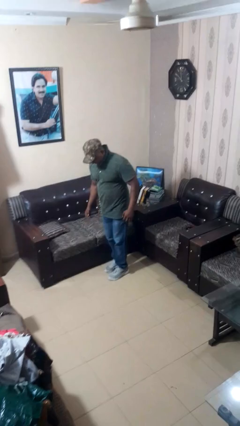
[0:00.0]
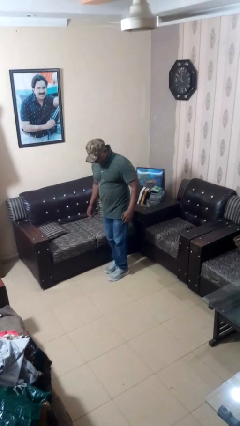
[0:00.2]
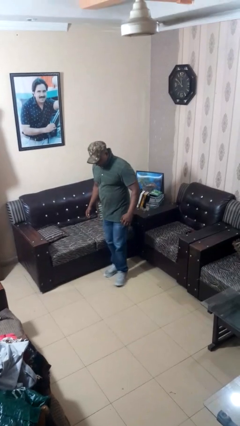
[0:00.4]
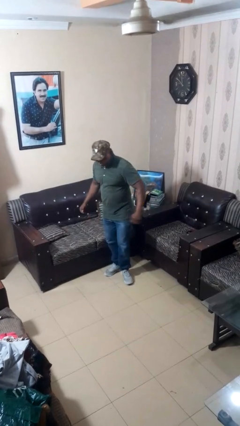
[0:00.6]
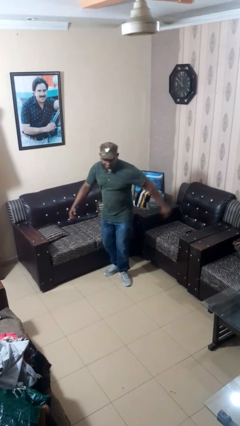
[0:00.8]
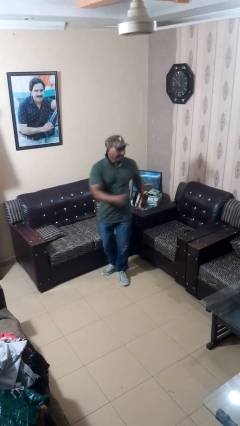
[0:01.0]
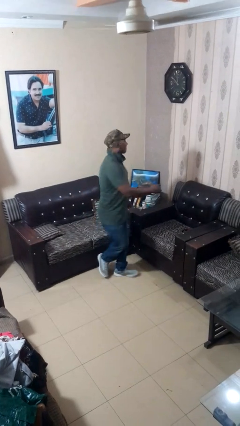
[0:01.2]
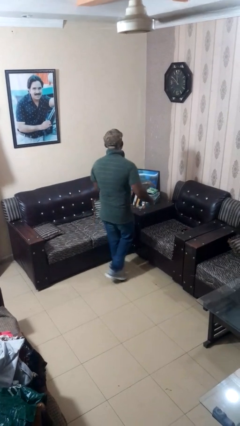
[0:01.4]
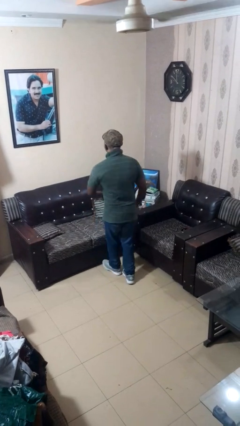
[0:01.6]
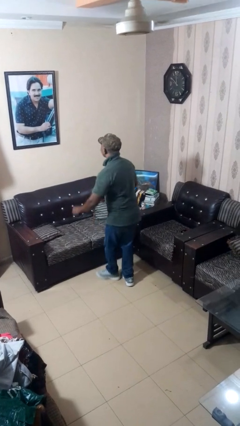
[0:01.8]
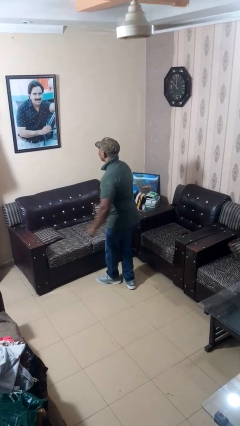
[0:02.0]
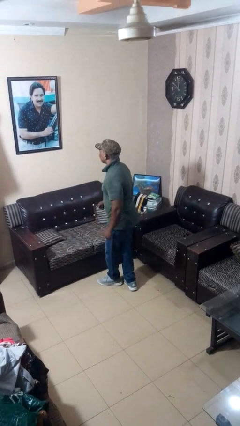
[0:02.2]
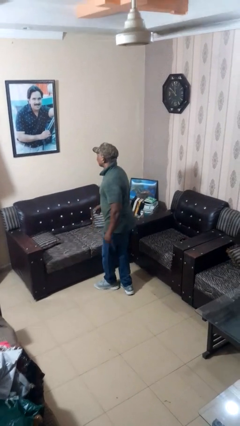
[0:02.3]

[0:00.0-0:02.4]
person twirls

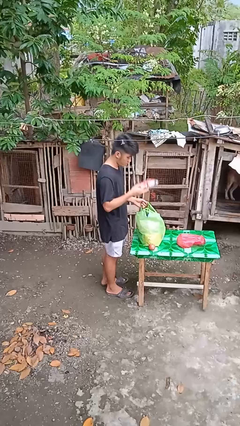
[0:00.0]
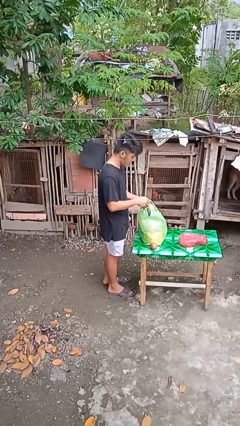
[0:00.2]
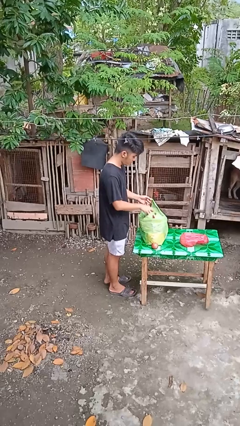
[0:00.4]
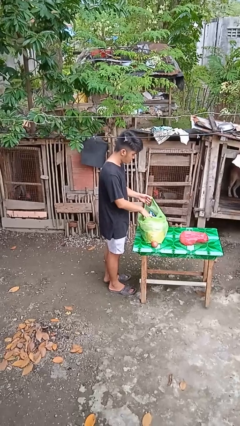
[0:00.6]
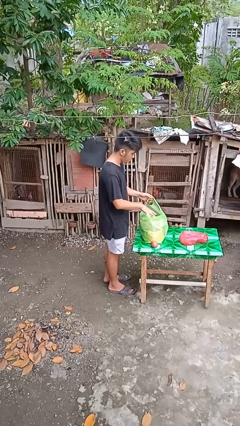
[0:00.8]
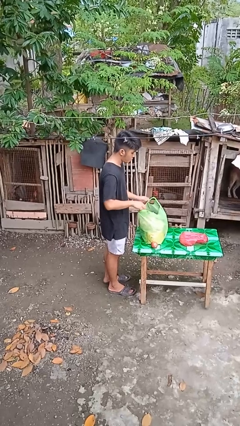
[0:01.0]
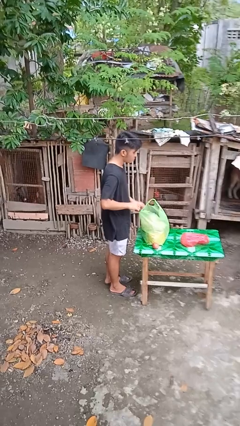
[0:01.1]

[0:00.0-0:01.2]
person puts object into bag

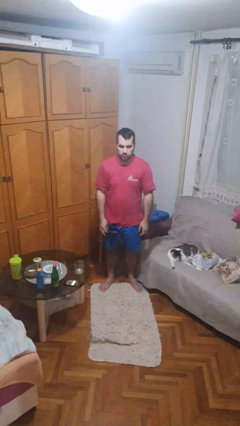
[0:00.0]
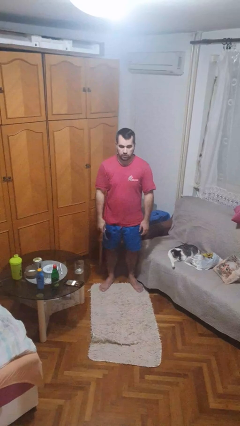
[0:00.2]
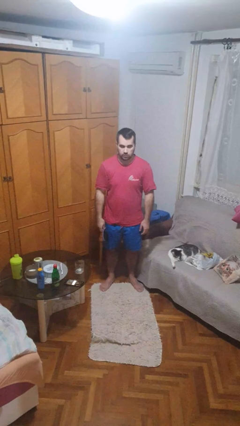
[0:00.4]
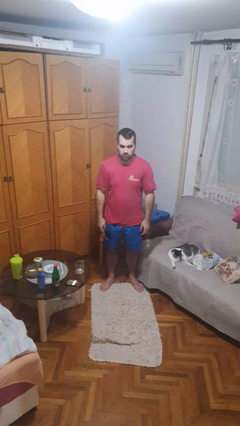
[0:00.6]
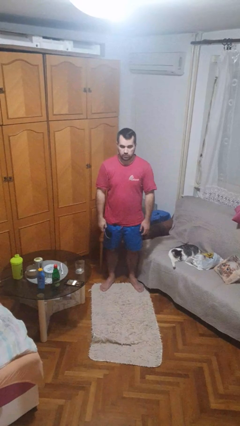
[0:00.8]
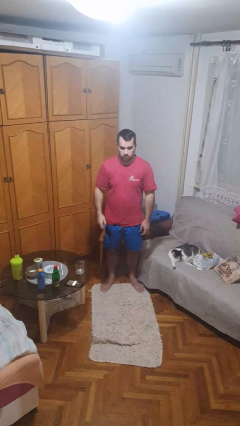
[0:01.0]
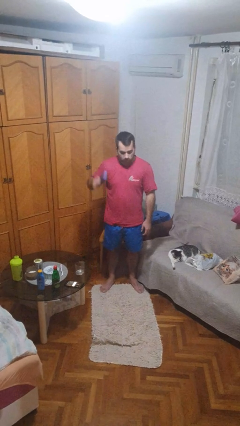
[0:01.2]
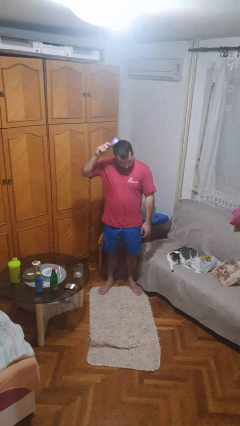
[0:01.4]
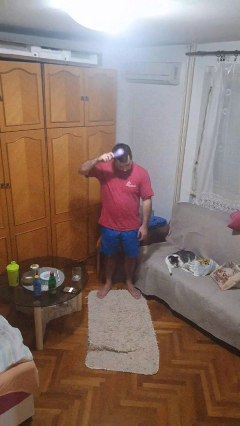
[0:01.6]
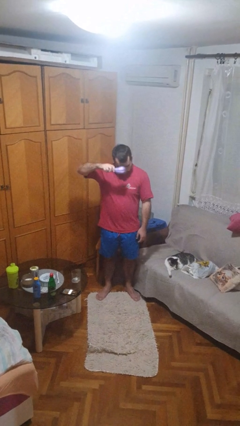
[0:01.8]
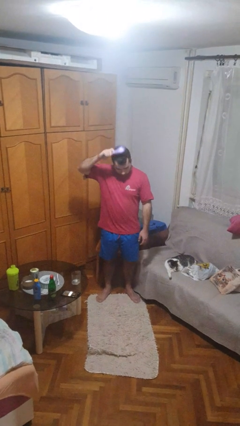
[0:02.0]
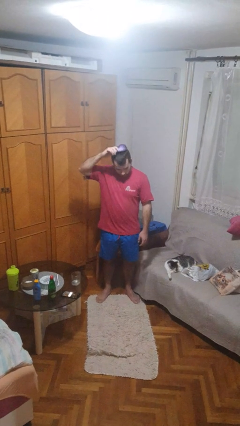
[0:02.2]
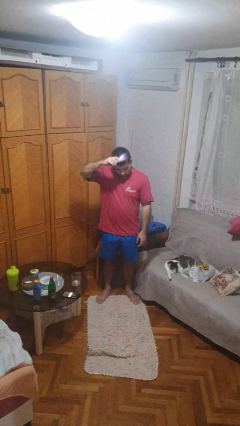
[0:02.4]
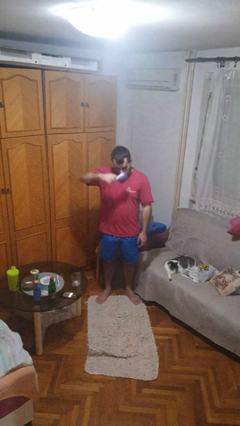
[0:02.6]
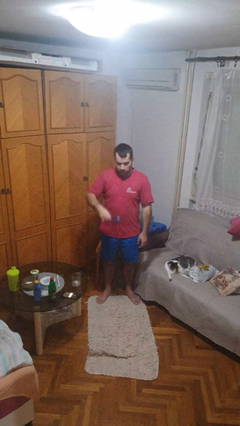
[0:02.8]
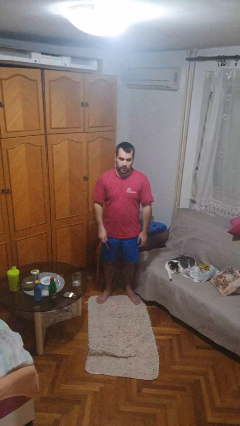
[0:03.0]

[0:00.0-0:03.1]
person brushes hair

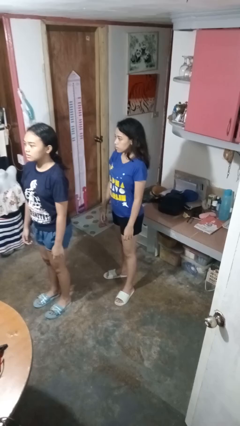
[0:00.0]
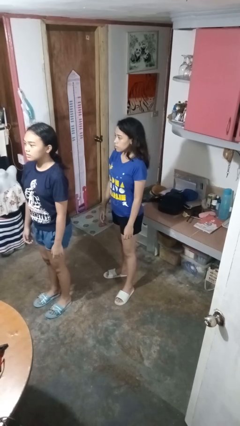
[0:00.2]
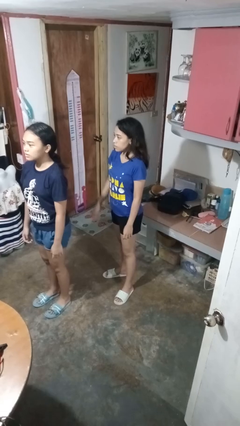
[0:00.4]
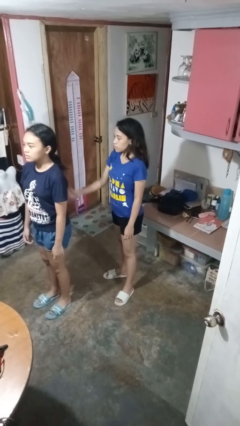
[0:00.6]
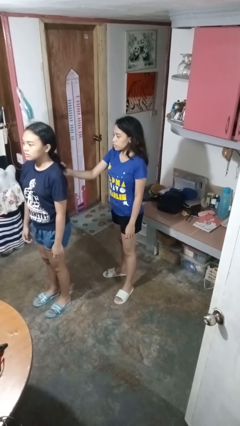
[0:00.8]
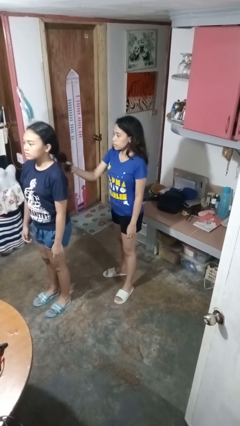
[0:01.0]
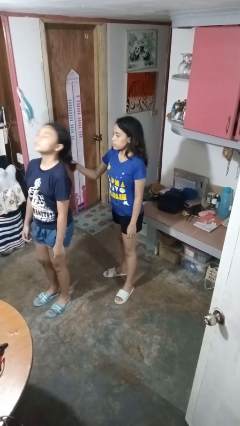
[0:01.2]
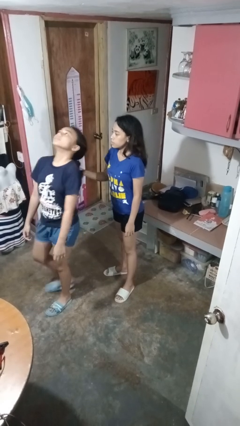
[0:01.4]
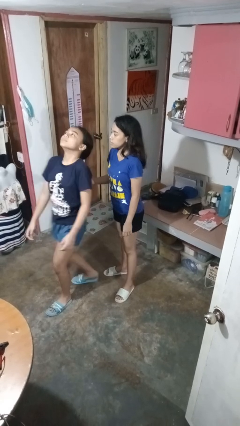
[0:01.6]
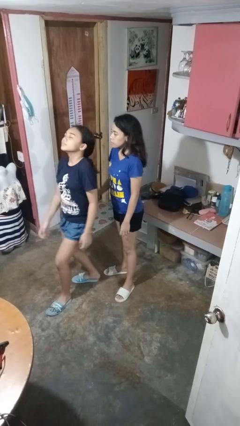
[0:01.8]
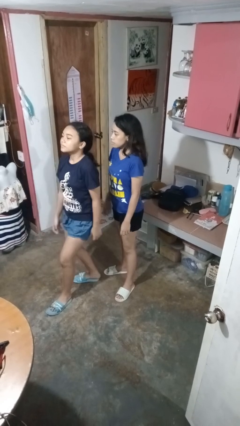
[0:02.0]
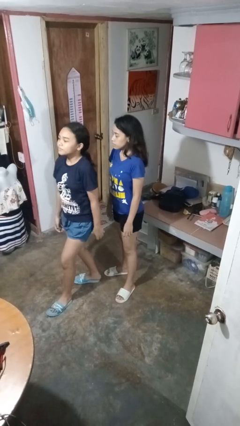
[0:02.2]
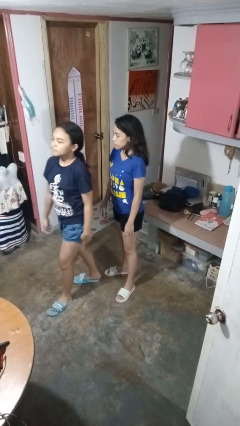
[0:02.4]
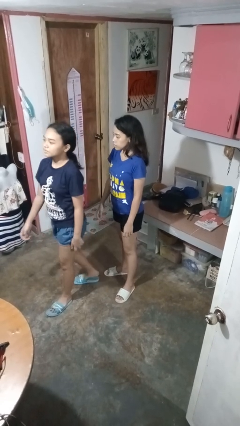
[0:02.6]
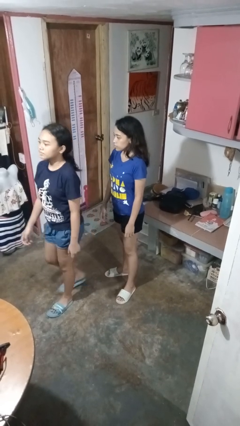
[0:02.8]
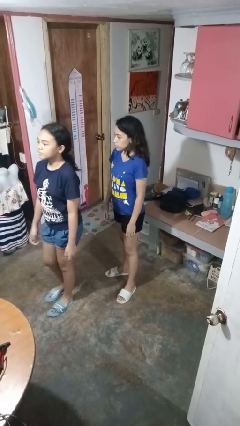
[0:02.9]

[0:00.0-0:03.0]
person grabs person by hair

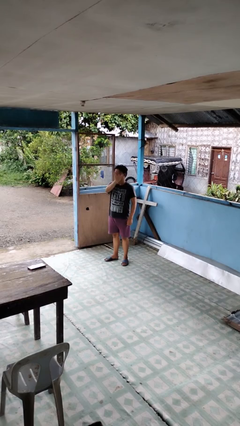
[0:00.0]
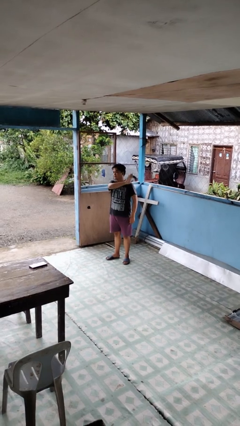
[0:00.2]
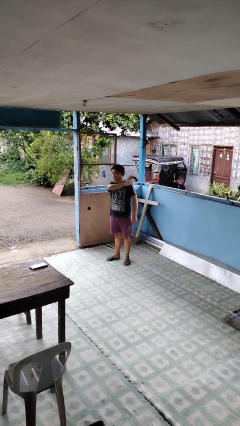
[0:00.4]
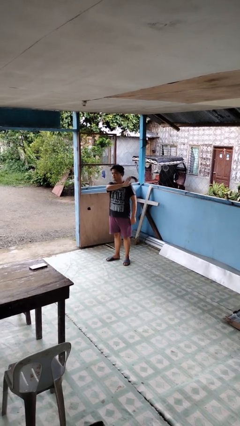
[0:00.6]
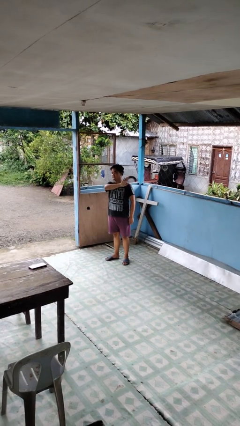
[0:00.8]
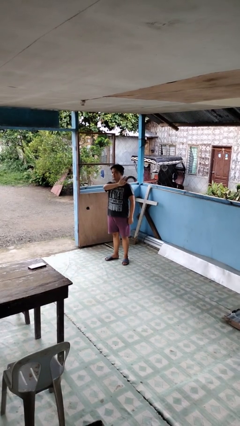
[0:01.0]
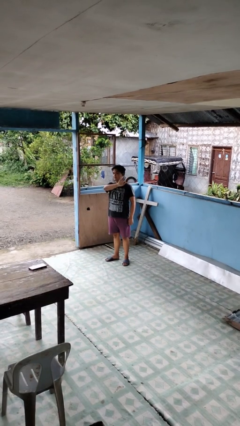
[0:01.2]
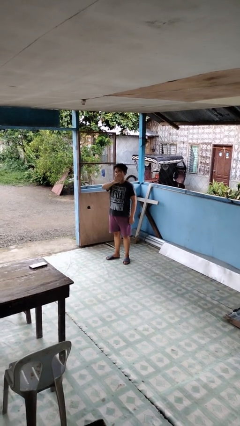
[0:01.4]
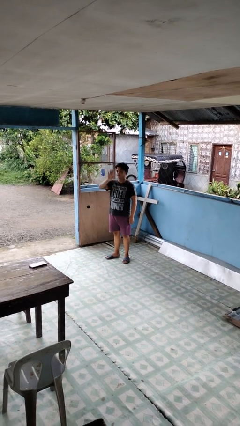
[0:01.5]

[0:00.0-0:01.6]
person gestures swipe left

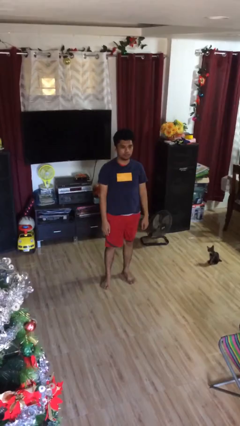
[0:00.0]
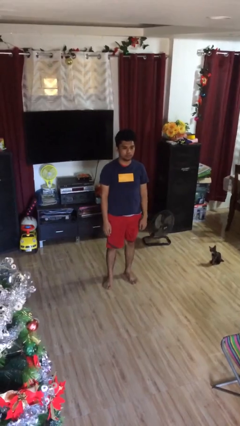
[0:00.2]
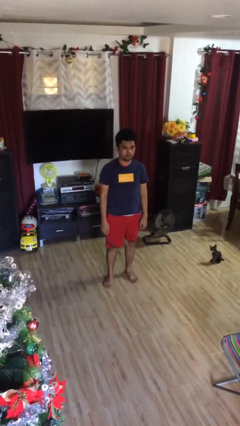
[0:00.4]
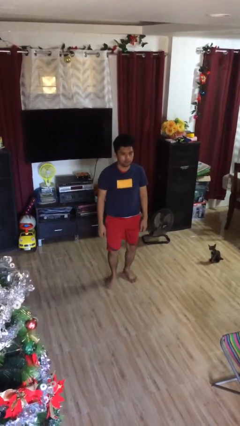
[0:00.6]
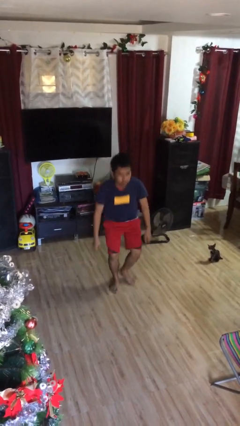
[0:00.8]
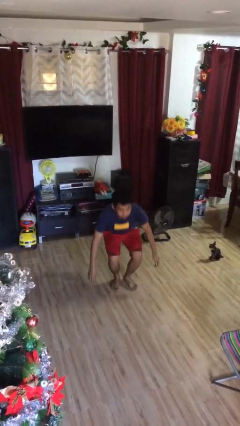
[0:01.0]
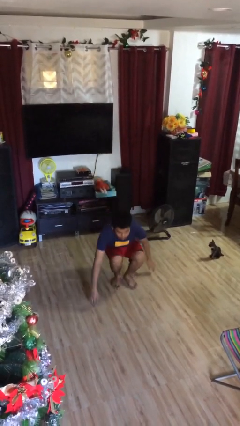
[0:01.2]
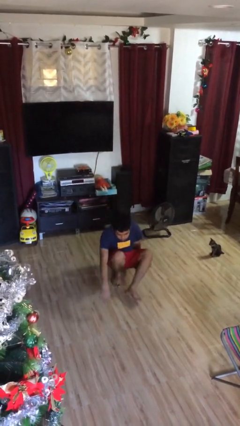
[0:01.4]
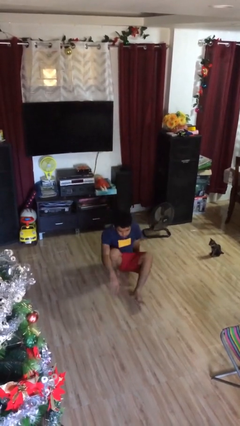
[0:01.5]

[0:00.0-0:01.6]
person sits down

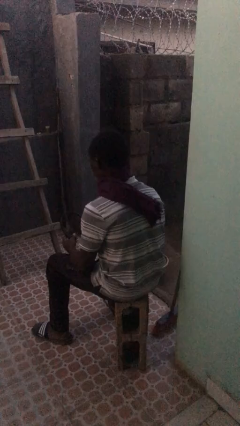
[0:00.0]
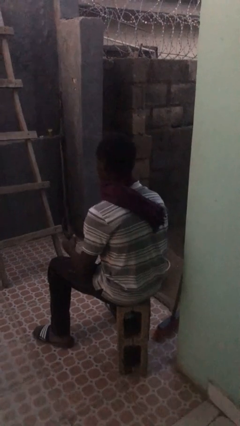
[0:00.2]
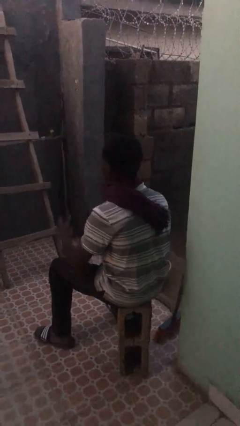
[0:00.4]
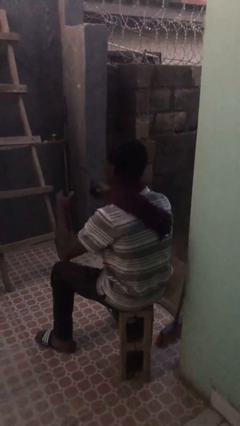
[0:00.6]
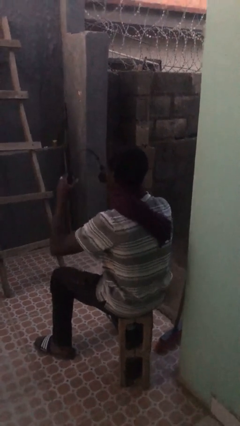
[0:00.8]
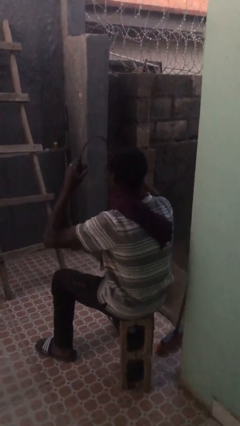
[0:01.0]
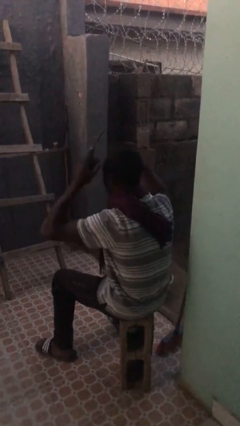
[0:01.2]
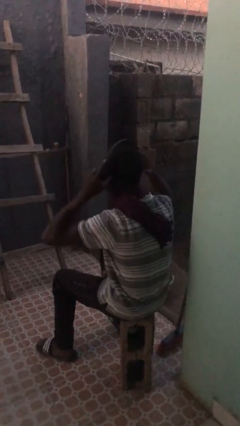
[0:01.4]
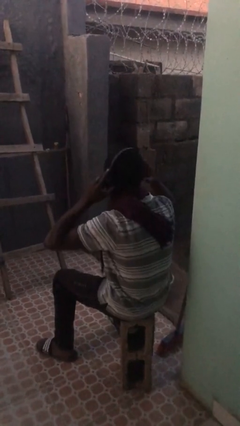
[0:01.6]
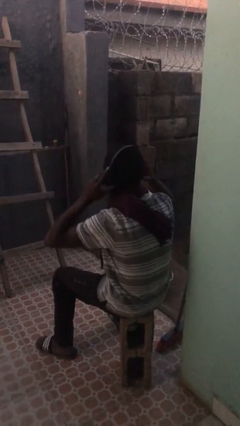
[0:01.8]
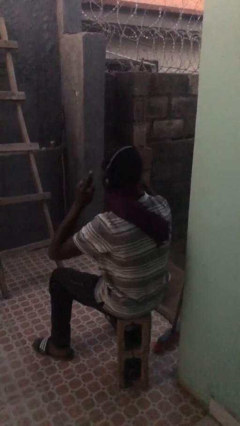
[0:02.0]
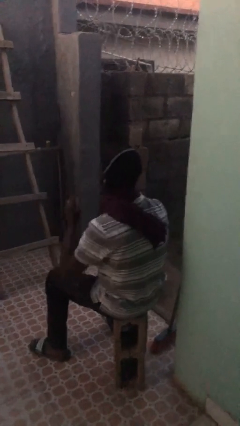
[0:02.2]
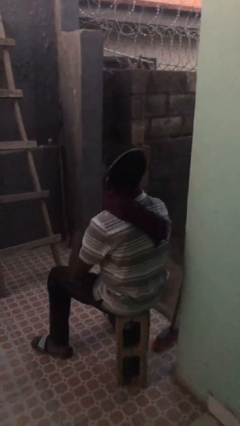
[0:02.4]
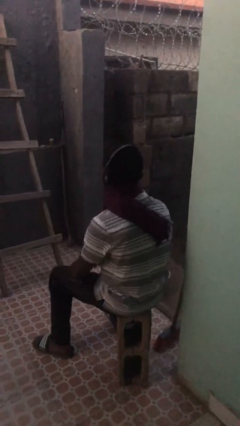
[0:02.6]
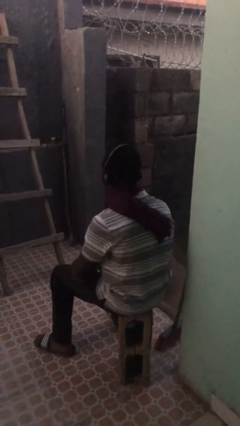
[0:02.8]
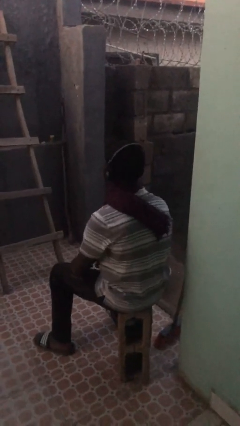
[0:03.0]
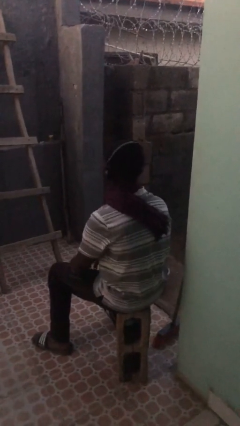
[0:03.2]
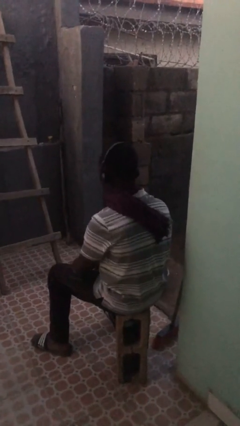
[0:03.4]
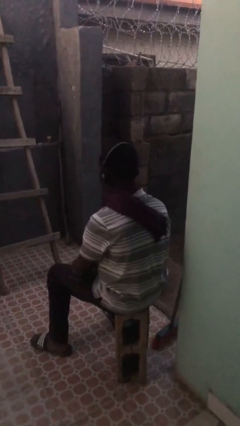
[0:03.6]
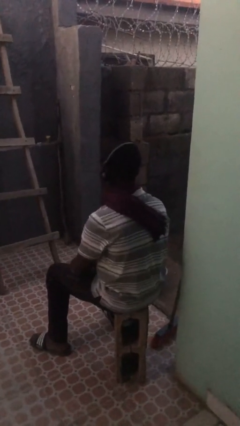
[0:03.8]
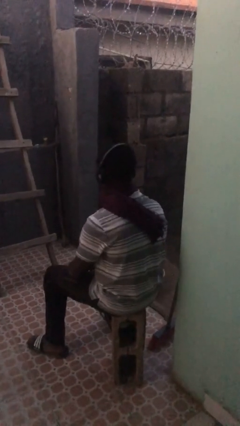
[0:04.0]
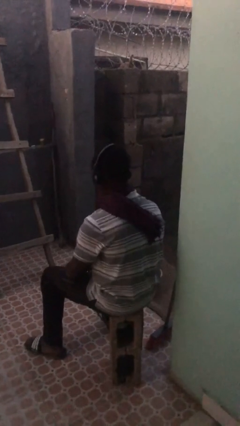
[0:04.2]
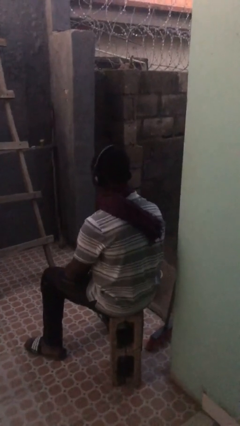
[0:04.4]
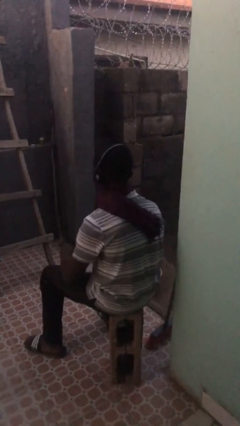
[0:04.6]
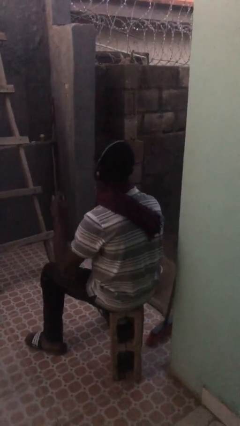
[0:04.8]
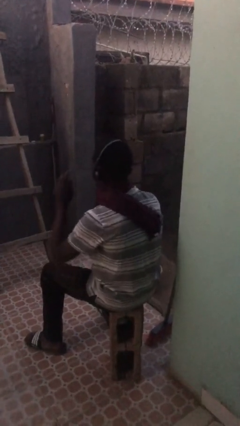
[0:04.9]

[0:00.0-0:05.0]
person puts on headphones
